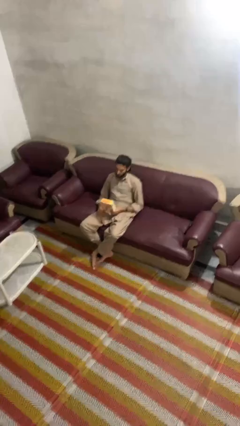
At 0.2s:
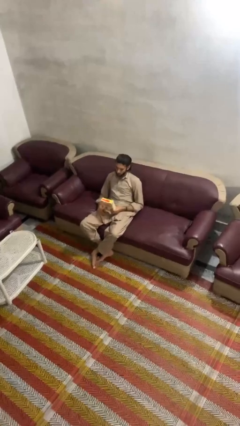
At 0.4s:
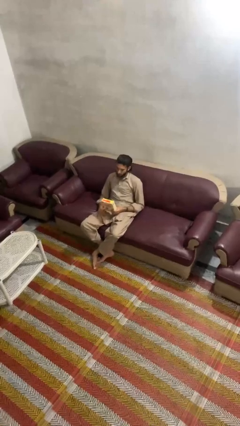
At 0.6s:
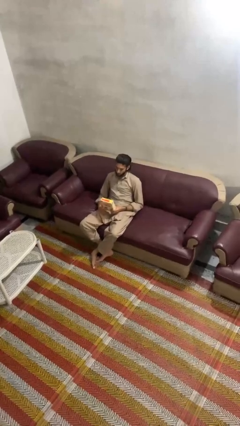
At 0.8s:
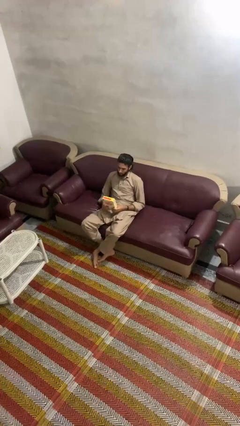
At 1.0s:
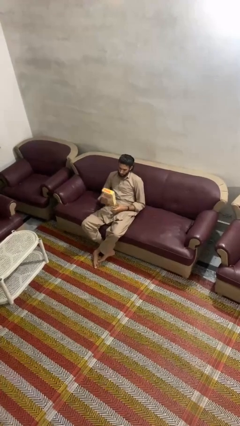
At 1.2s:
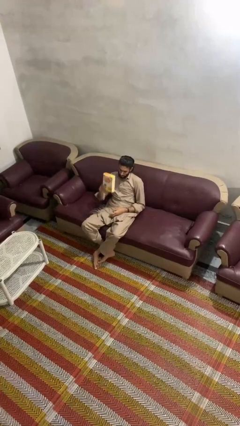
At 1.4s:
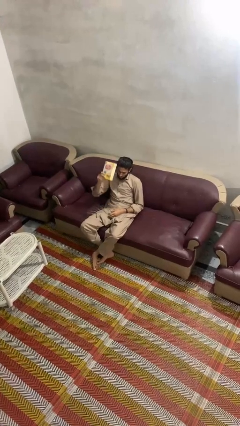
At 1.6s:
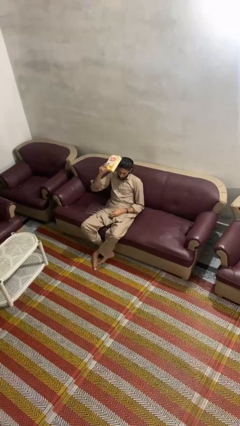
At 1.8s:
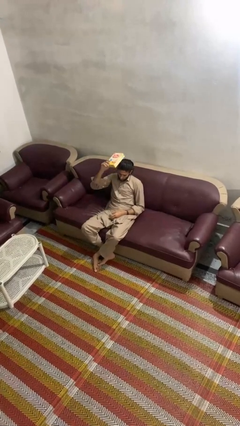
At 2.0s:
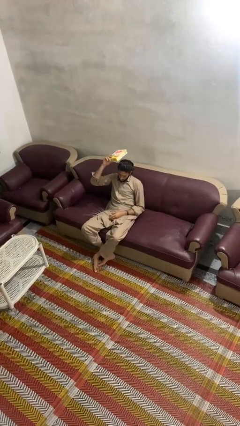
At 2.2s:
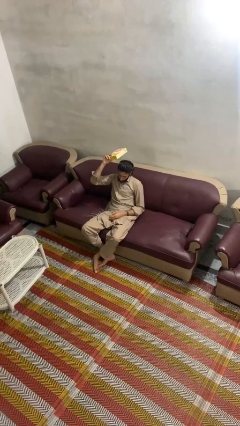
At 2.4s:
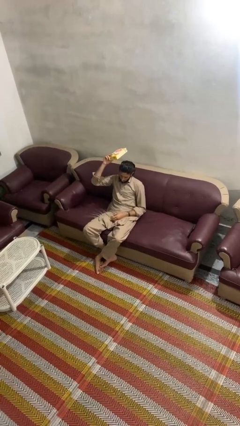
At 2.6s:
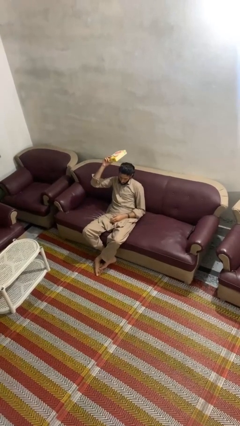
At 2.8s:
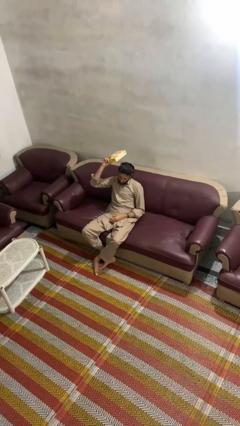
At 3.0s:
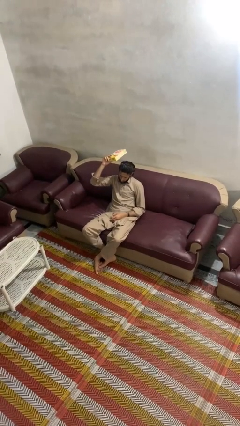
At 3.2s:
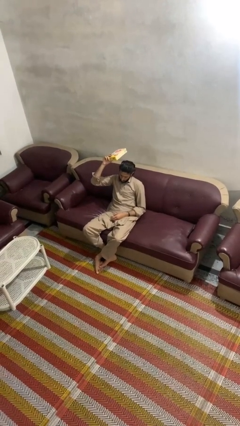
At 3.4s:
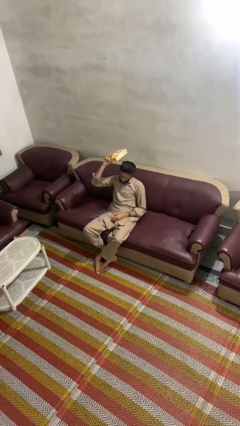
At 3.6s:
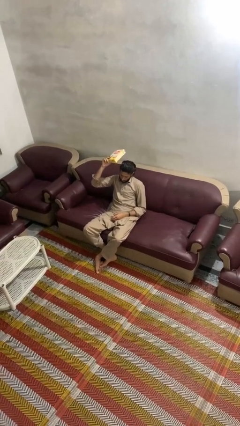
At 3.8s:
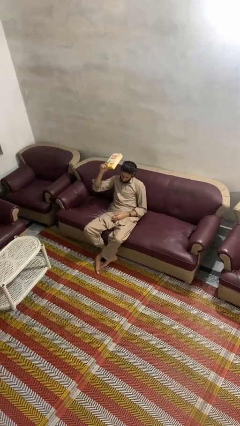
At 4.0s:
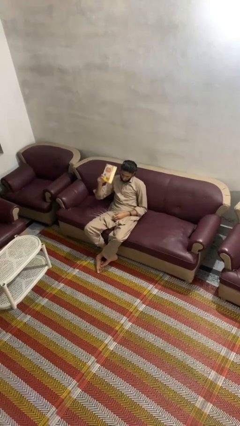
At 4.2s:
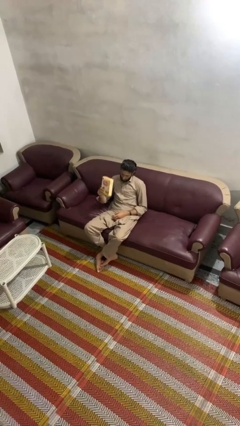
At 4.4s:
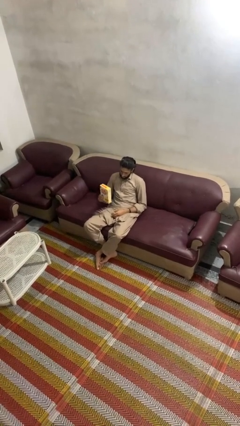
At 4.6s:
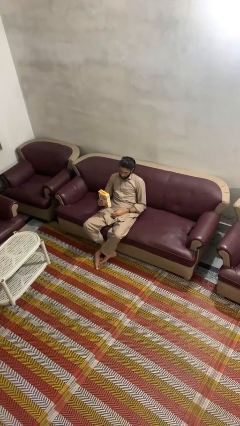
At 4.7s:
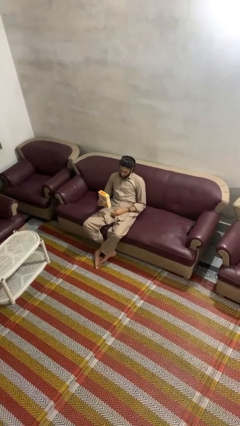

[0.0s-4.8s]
person holds object above head

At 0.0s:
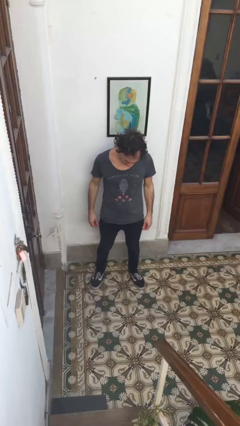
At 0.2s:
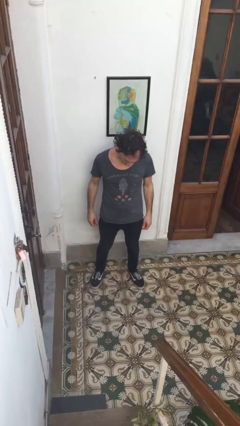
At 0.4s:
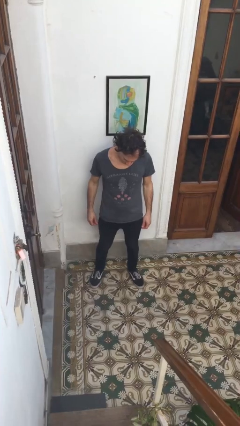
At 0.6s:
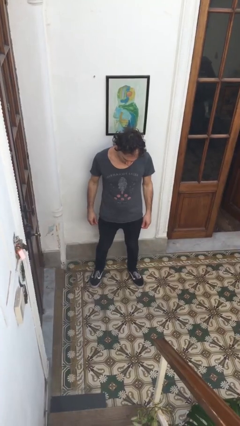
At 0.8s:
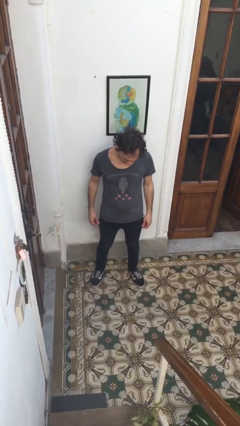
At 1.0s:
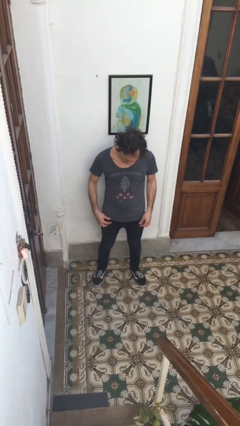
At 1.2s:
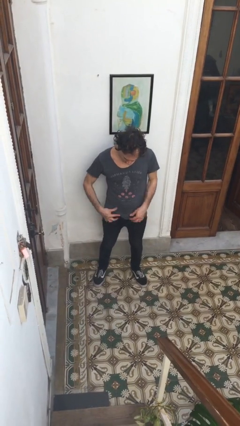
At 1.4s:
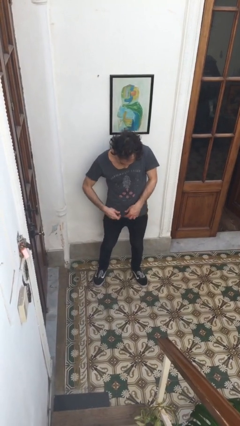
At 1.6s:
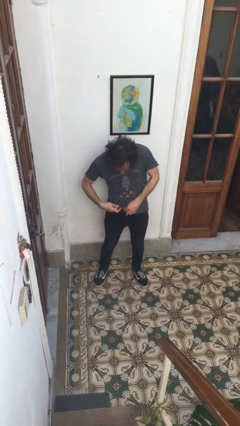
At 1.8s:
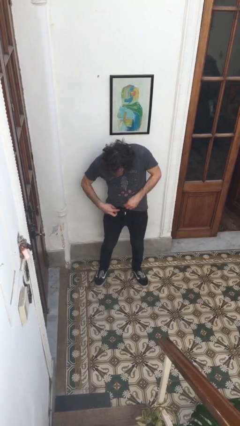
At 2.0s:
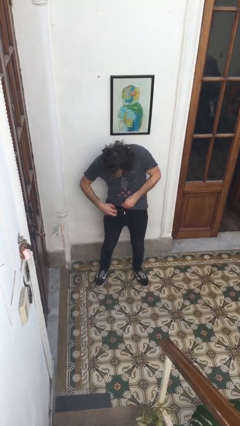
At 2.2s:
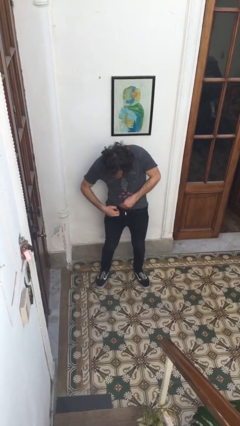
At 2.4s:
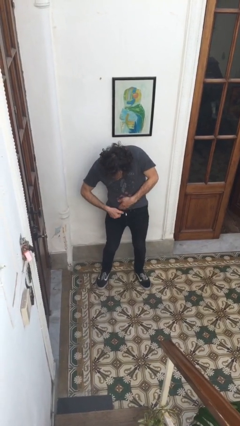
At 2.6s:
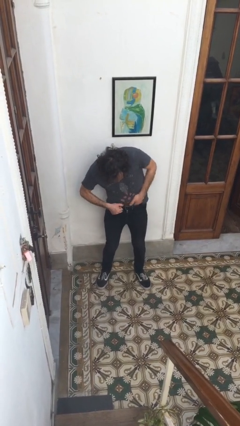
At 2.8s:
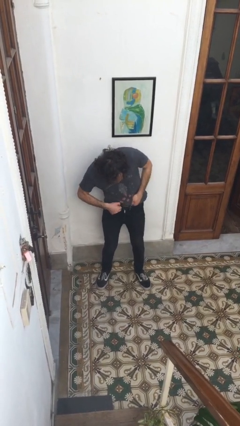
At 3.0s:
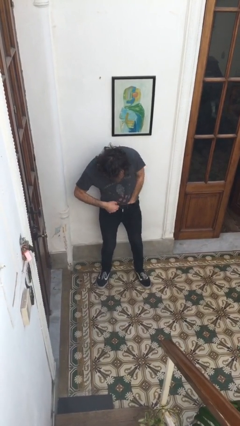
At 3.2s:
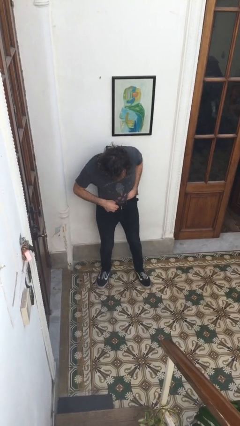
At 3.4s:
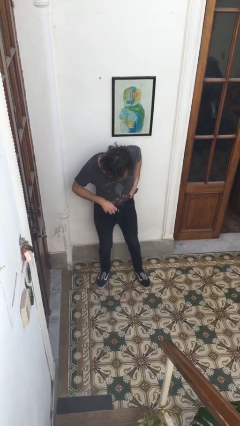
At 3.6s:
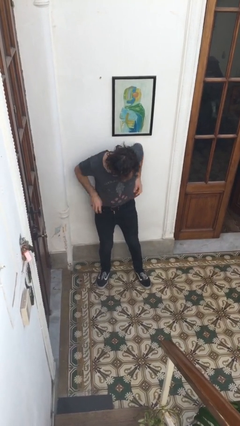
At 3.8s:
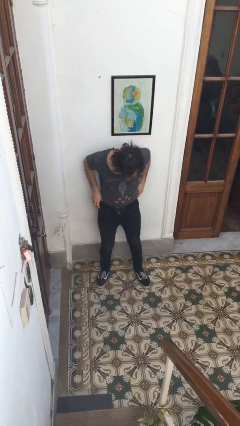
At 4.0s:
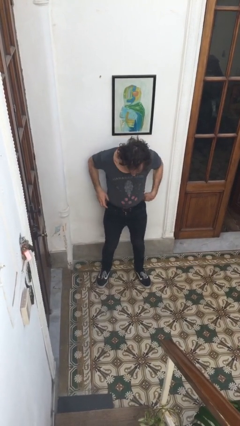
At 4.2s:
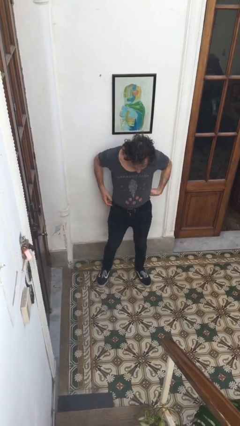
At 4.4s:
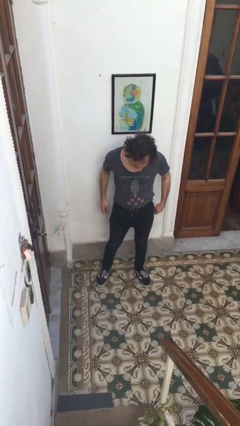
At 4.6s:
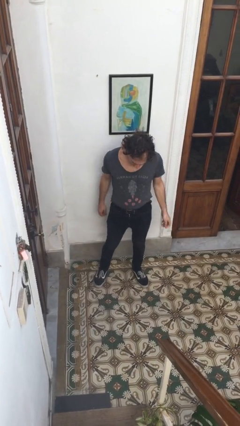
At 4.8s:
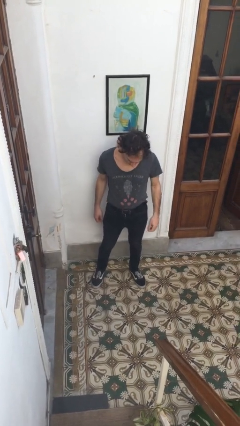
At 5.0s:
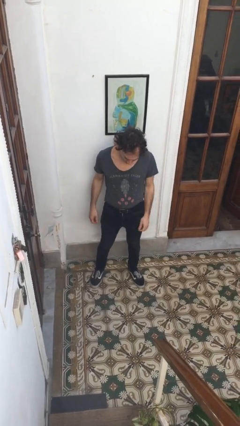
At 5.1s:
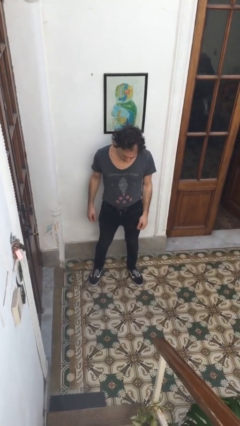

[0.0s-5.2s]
person tucks in shirt

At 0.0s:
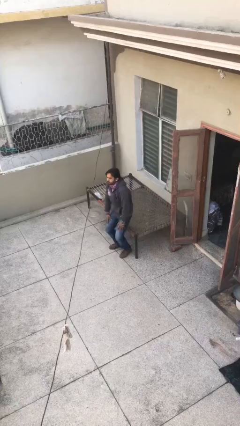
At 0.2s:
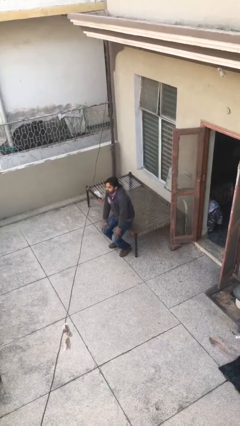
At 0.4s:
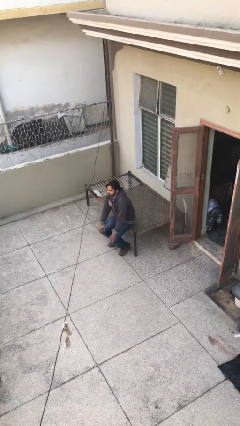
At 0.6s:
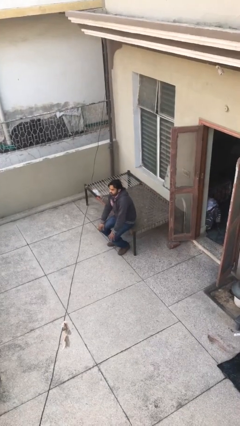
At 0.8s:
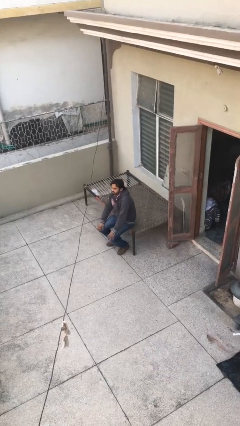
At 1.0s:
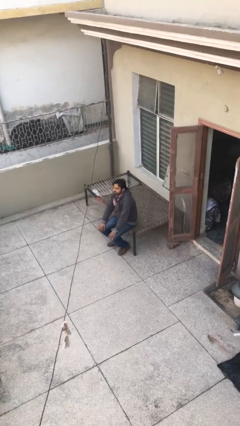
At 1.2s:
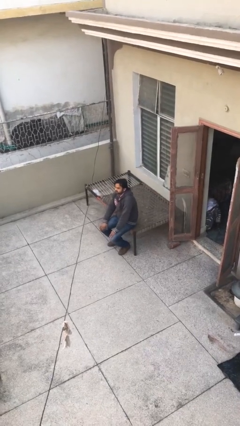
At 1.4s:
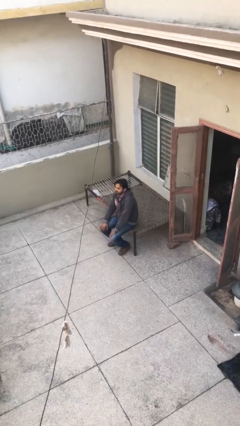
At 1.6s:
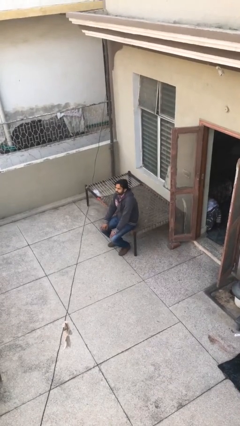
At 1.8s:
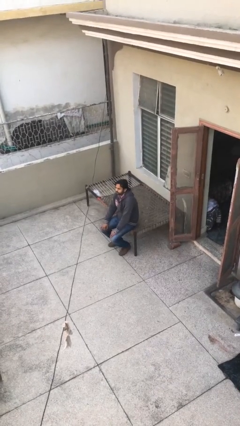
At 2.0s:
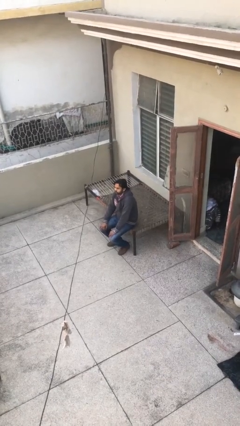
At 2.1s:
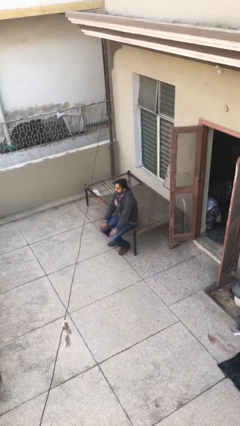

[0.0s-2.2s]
person sits down

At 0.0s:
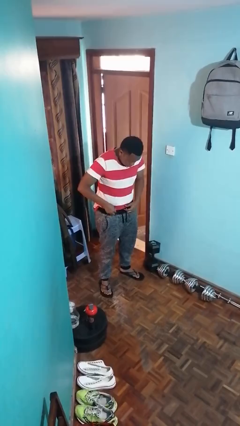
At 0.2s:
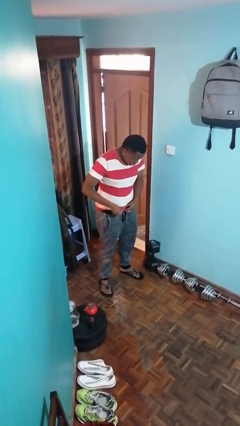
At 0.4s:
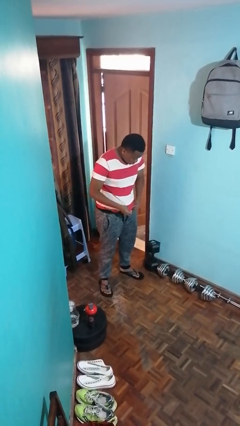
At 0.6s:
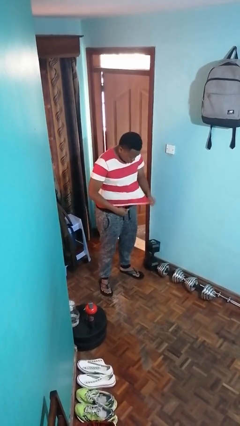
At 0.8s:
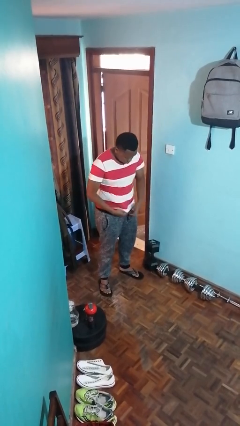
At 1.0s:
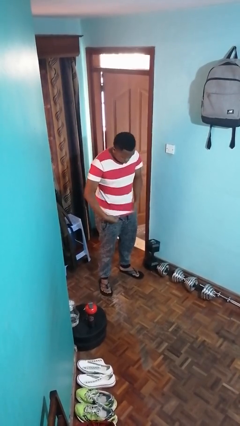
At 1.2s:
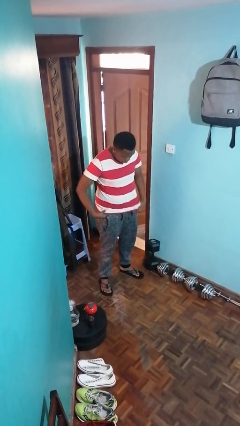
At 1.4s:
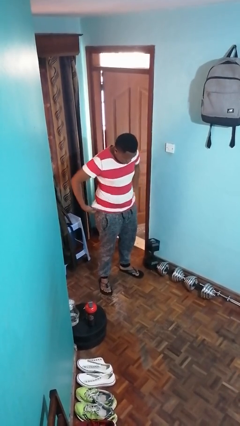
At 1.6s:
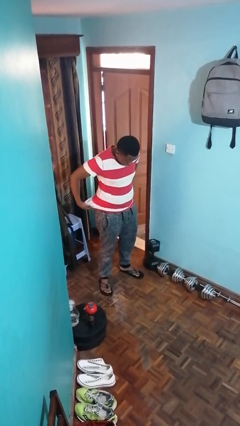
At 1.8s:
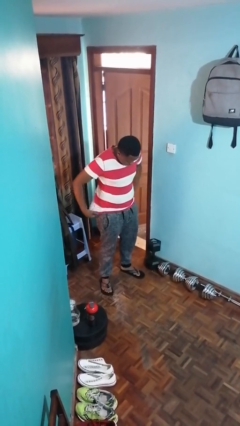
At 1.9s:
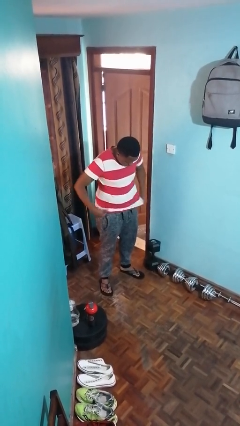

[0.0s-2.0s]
person untucks shirt

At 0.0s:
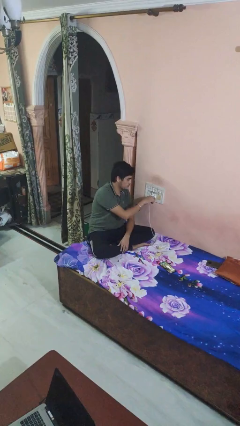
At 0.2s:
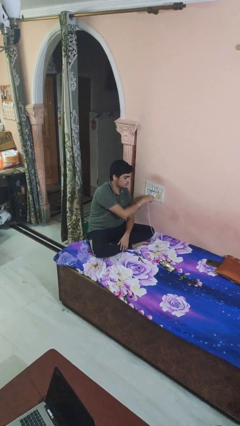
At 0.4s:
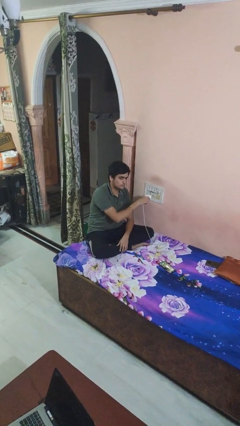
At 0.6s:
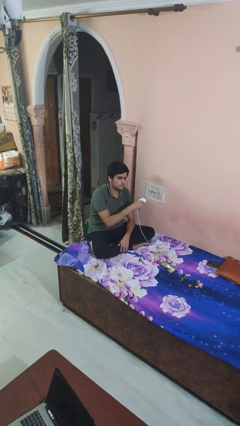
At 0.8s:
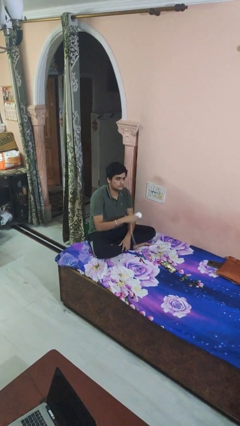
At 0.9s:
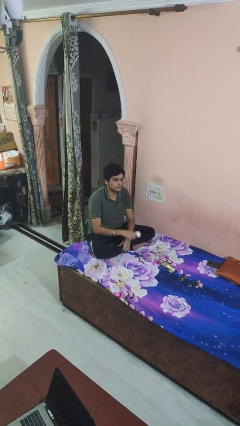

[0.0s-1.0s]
person unplugs from electrical socket

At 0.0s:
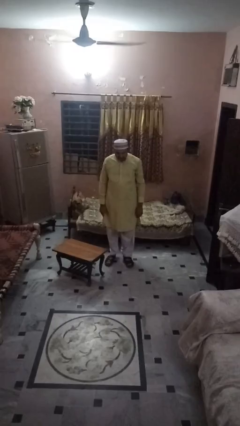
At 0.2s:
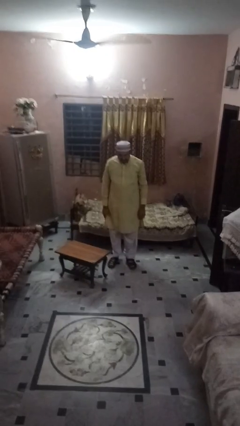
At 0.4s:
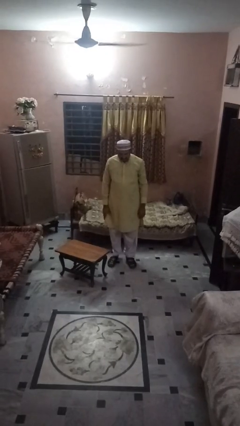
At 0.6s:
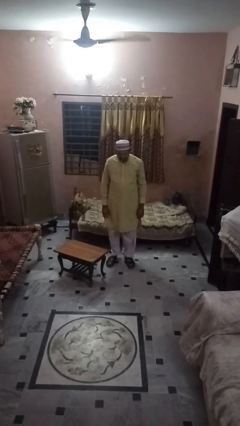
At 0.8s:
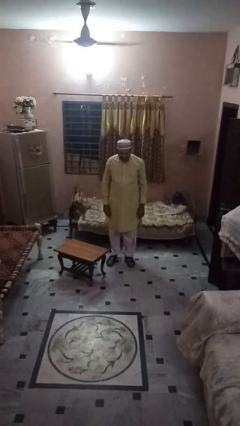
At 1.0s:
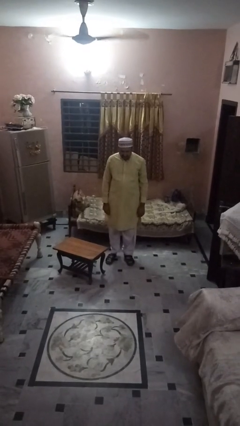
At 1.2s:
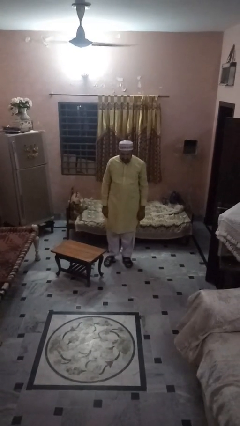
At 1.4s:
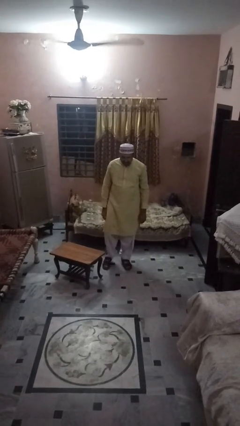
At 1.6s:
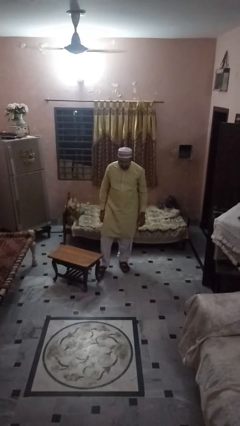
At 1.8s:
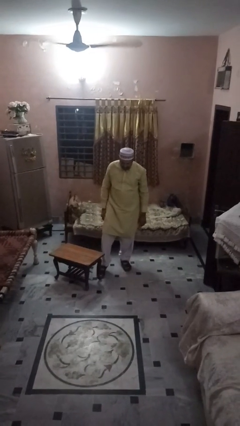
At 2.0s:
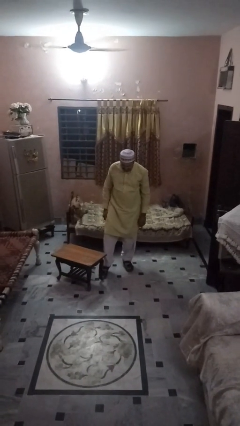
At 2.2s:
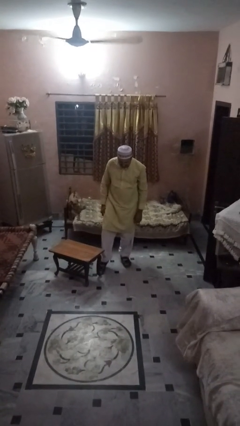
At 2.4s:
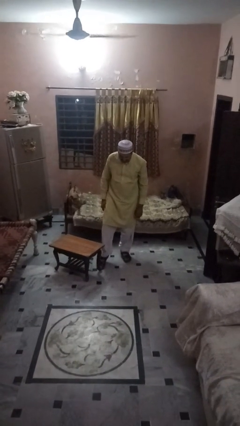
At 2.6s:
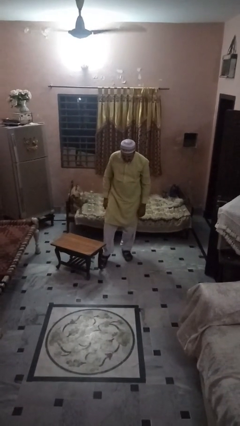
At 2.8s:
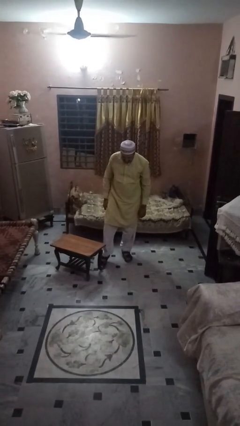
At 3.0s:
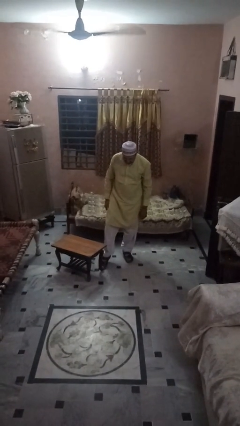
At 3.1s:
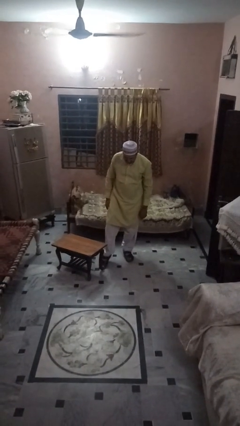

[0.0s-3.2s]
person trips on object on floor
